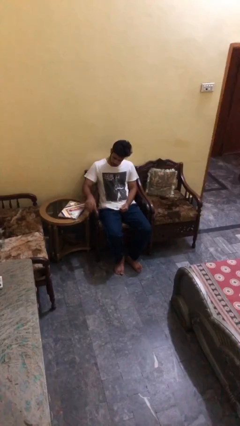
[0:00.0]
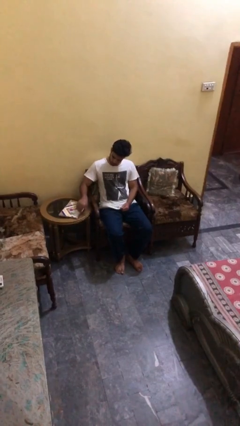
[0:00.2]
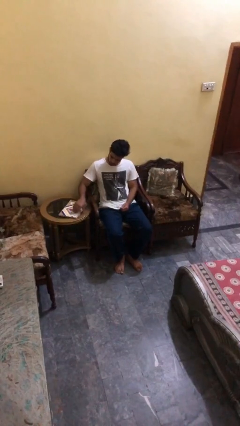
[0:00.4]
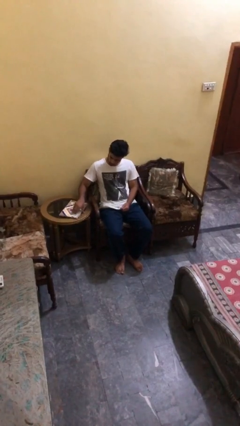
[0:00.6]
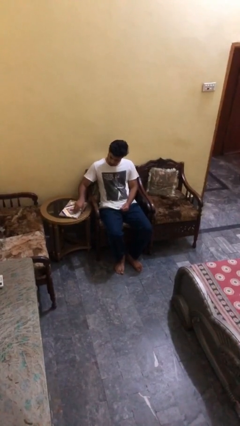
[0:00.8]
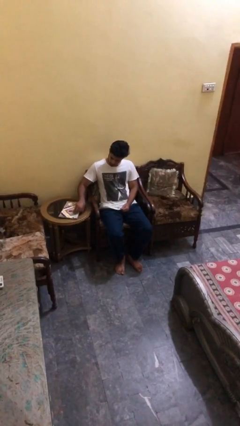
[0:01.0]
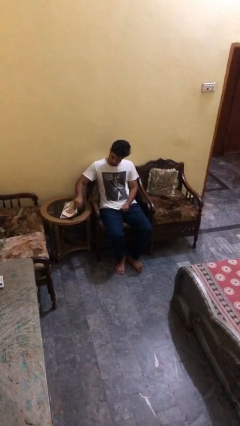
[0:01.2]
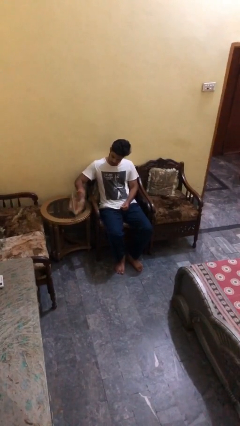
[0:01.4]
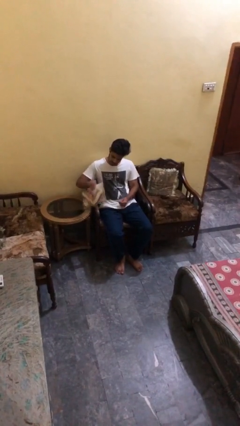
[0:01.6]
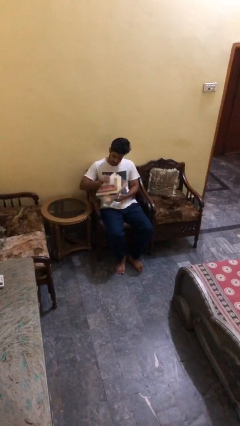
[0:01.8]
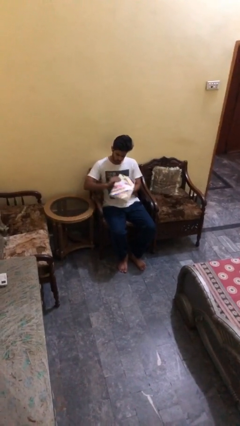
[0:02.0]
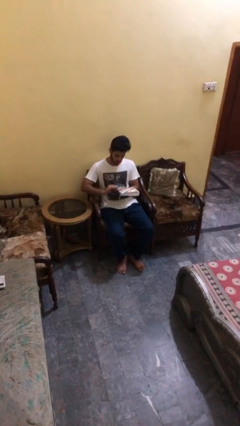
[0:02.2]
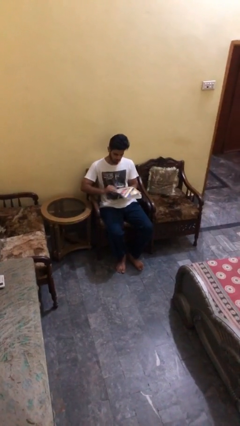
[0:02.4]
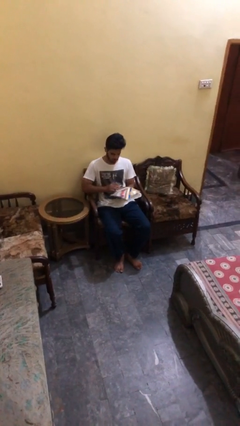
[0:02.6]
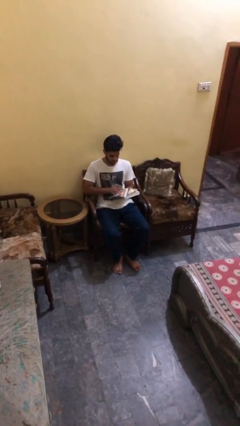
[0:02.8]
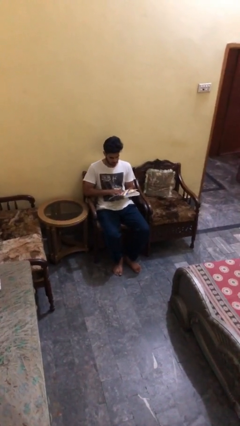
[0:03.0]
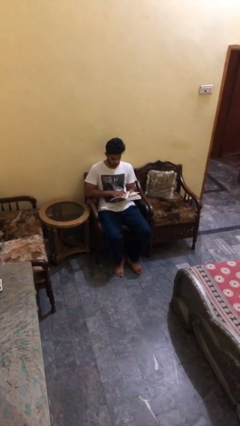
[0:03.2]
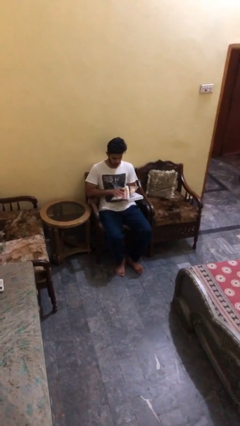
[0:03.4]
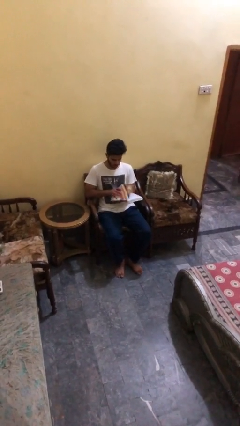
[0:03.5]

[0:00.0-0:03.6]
person picks up object from table

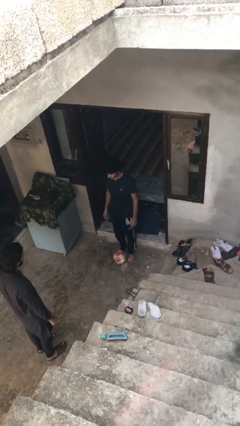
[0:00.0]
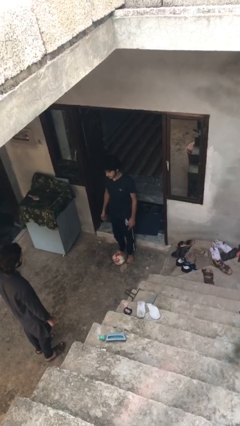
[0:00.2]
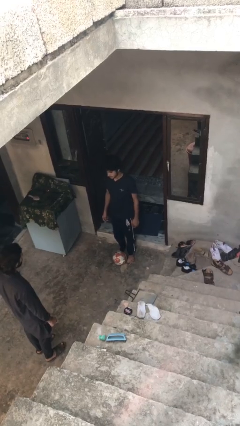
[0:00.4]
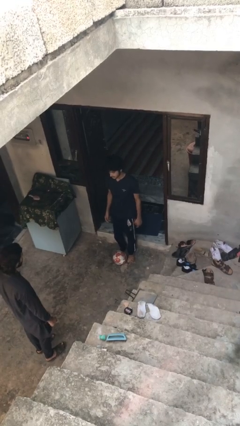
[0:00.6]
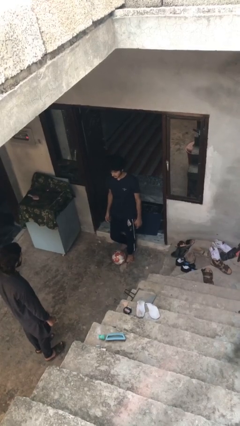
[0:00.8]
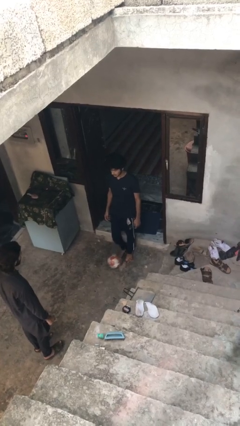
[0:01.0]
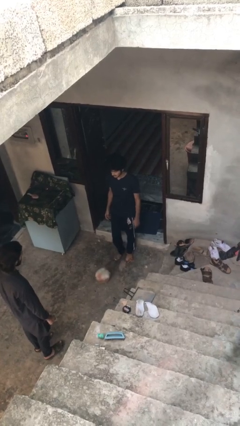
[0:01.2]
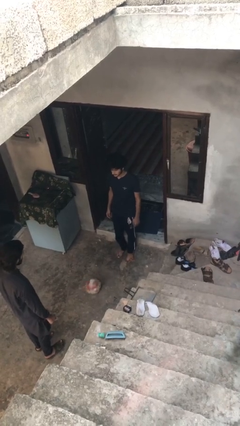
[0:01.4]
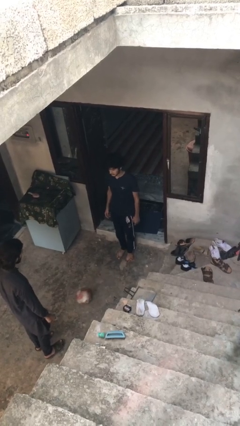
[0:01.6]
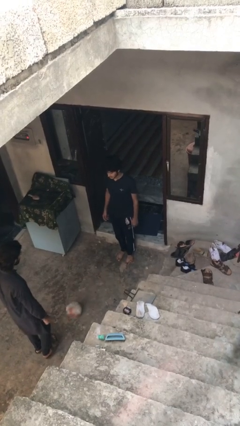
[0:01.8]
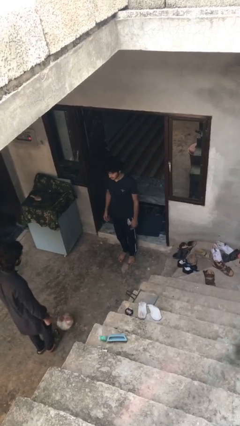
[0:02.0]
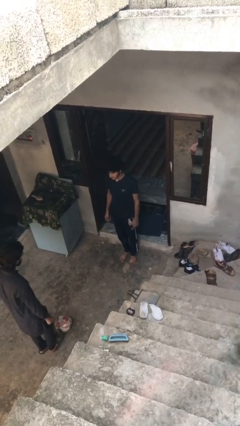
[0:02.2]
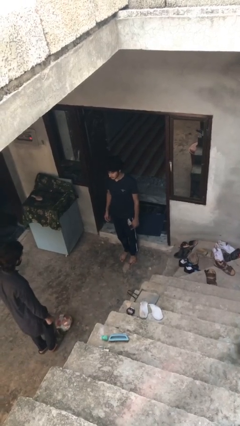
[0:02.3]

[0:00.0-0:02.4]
person kicks object to person

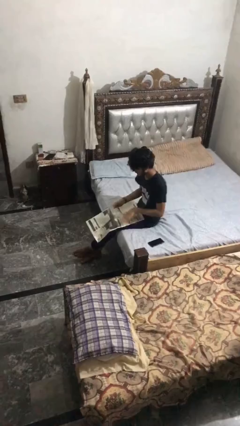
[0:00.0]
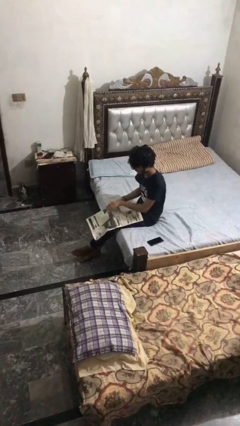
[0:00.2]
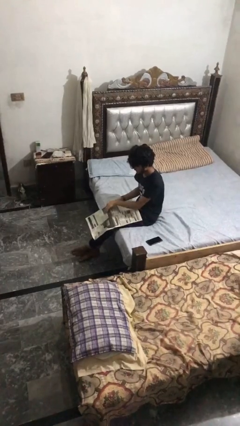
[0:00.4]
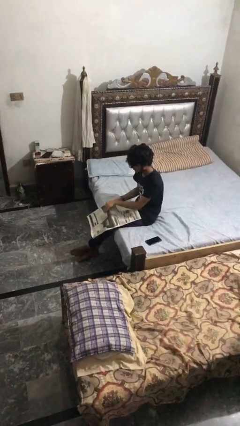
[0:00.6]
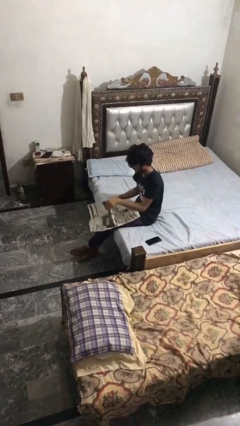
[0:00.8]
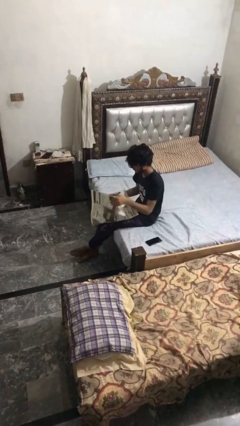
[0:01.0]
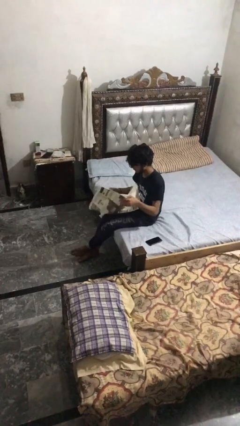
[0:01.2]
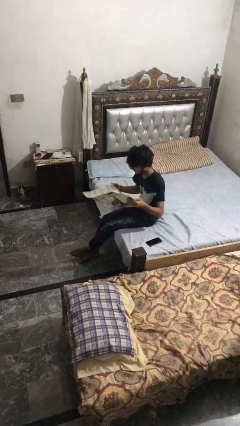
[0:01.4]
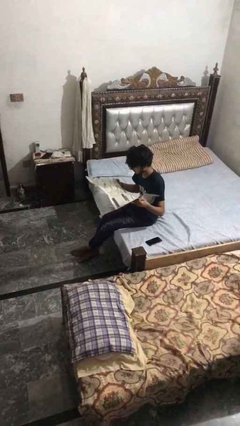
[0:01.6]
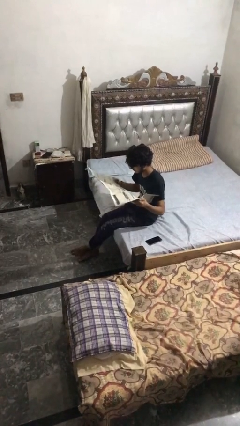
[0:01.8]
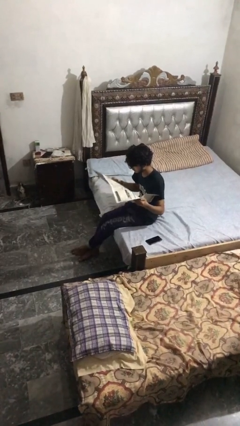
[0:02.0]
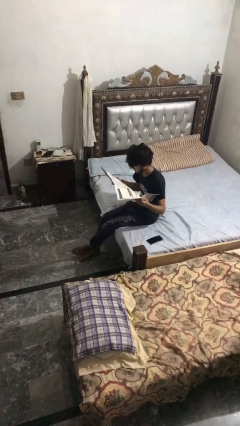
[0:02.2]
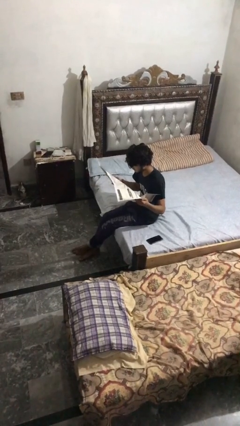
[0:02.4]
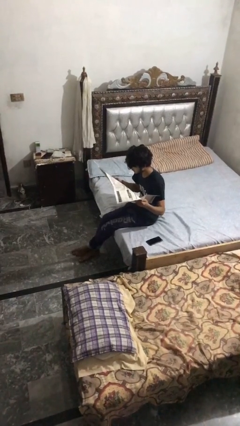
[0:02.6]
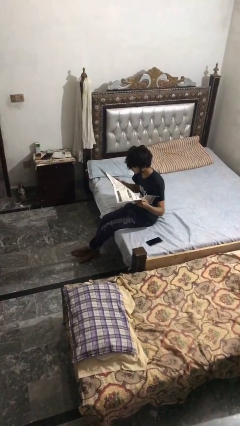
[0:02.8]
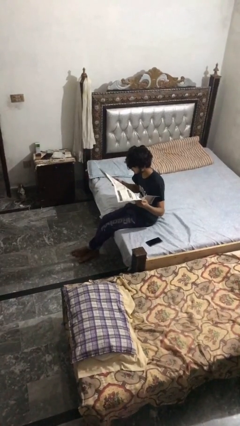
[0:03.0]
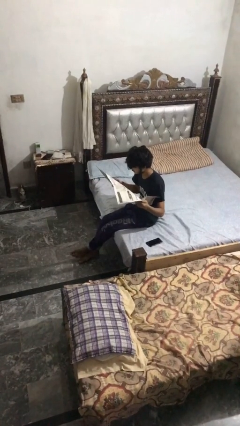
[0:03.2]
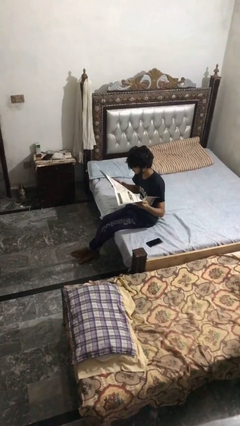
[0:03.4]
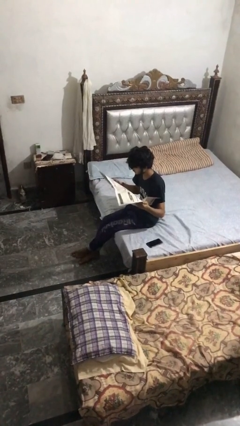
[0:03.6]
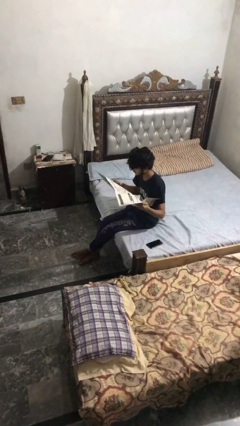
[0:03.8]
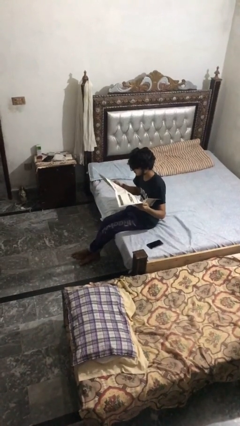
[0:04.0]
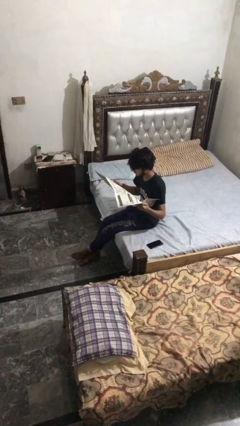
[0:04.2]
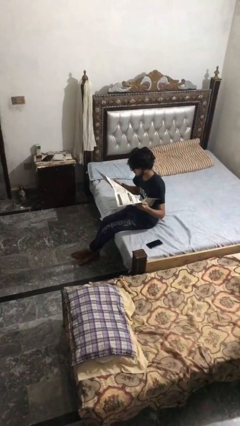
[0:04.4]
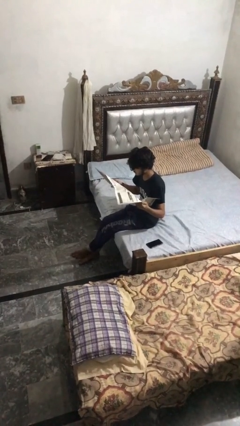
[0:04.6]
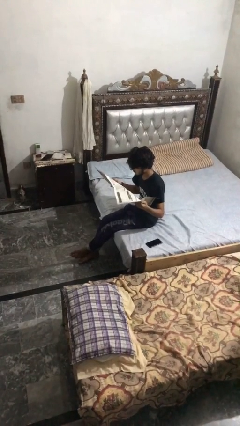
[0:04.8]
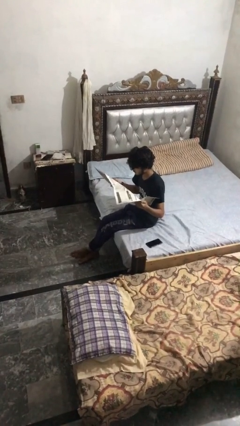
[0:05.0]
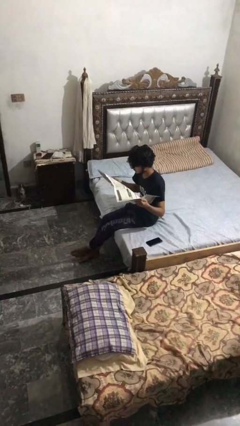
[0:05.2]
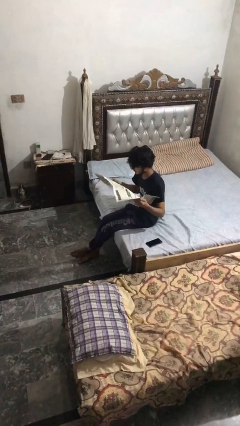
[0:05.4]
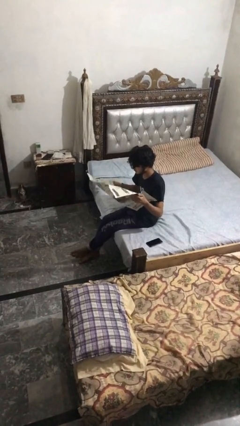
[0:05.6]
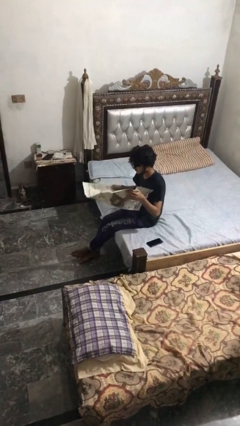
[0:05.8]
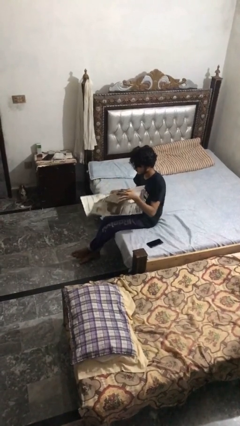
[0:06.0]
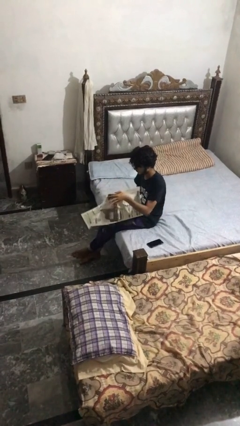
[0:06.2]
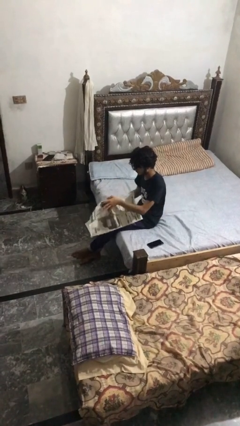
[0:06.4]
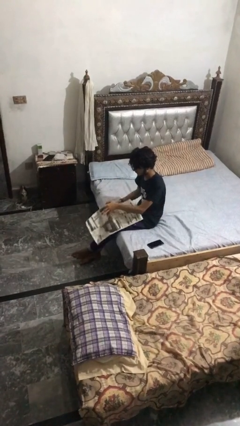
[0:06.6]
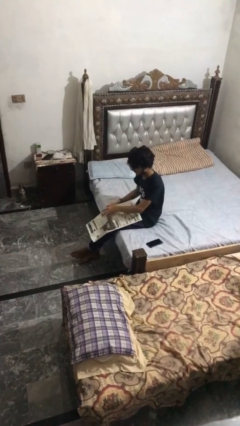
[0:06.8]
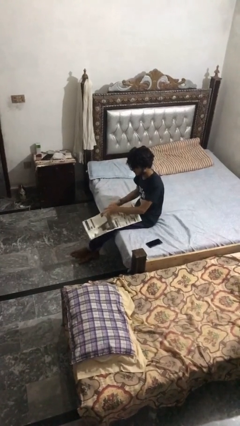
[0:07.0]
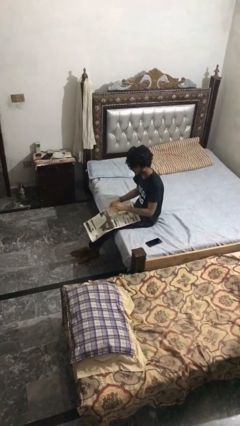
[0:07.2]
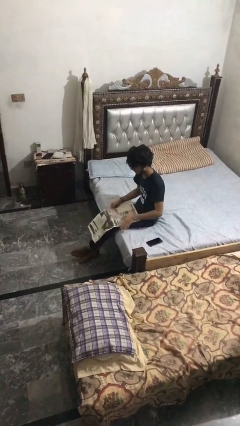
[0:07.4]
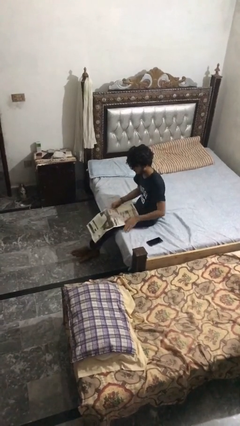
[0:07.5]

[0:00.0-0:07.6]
person reads newspaper

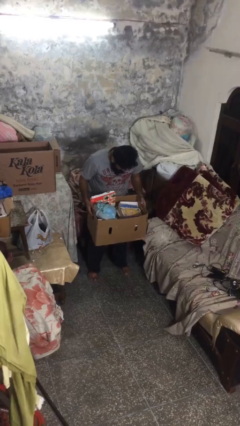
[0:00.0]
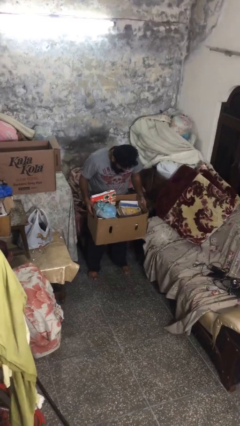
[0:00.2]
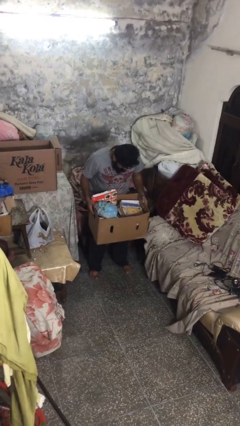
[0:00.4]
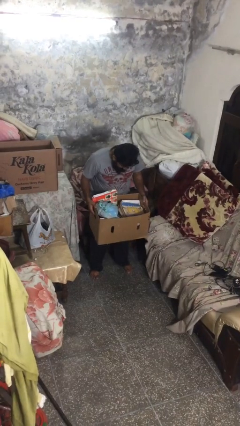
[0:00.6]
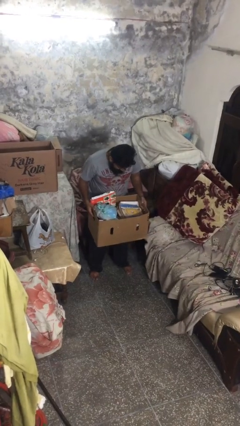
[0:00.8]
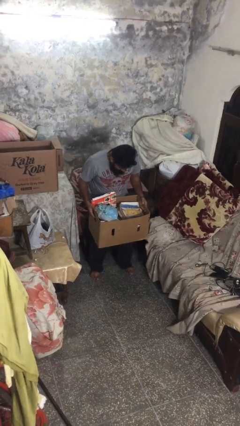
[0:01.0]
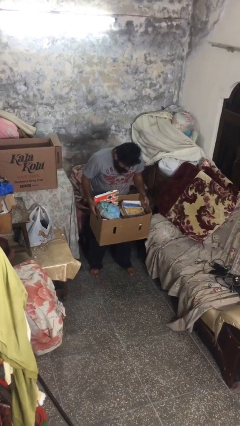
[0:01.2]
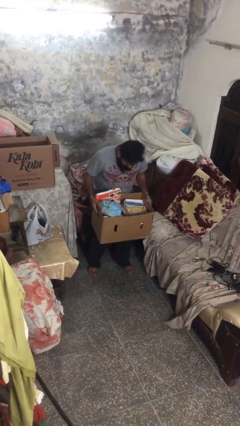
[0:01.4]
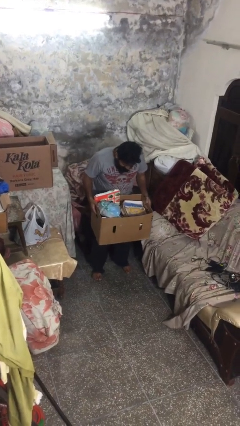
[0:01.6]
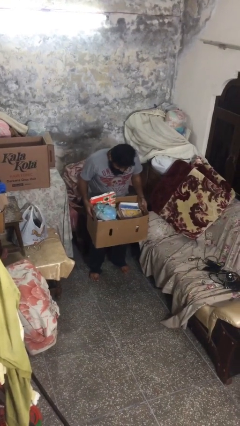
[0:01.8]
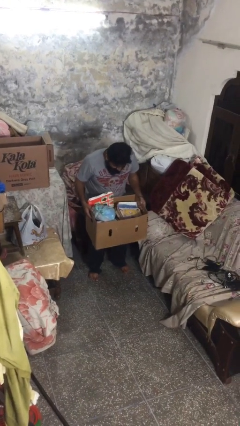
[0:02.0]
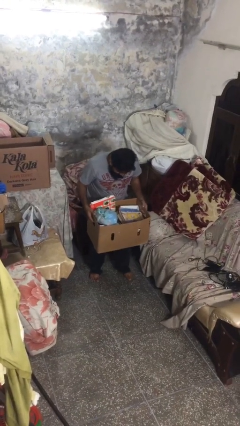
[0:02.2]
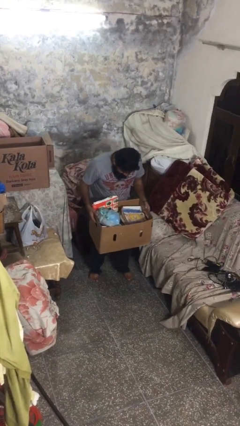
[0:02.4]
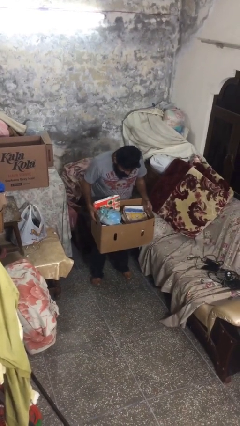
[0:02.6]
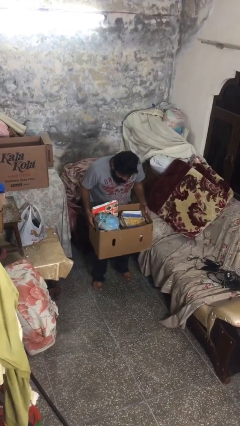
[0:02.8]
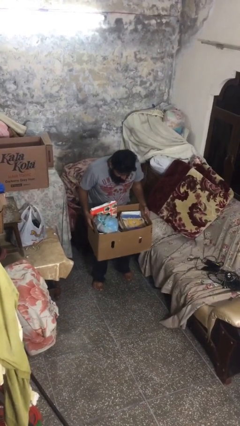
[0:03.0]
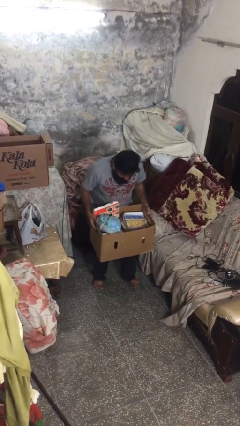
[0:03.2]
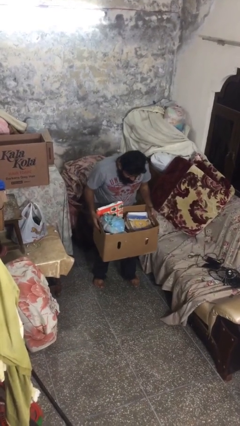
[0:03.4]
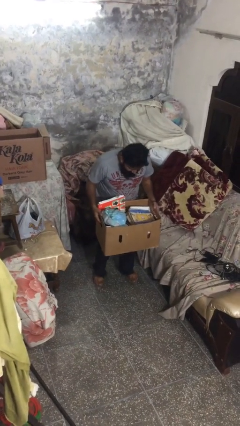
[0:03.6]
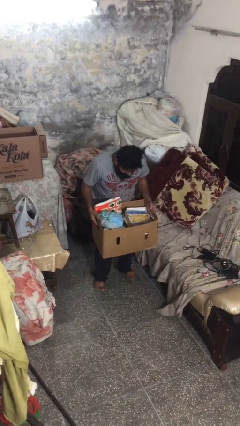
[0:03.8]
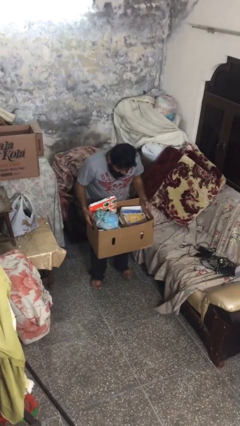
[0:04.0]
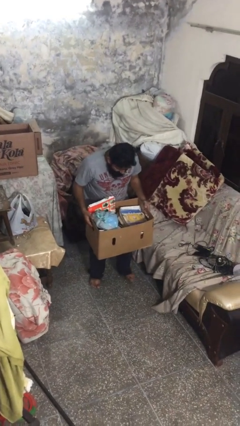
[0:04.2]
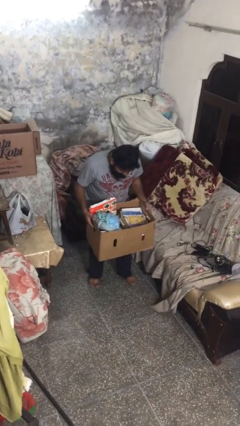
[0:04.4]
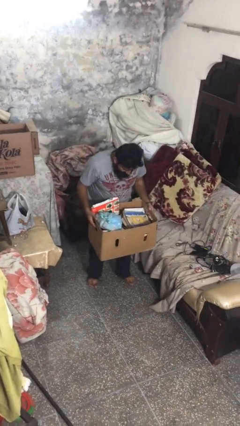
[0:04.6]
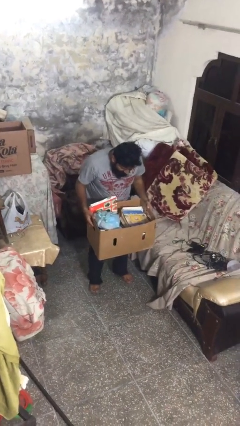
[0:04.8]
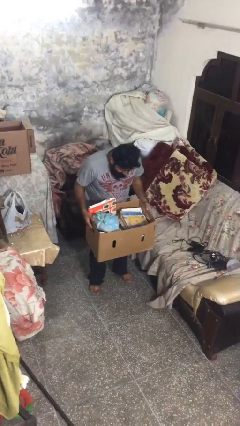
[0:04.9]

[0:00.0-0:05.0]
person carries heavy object
